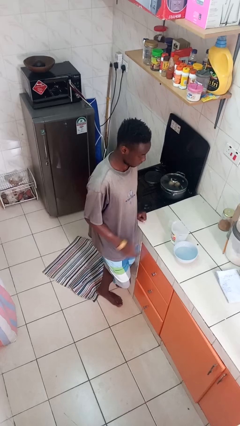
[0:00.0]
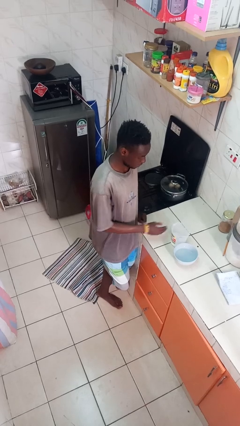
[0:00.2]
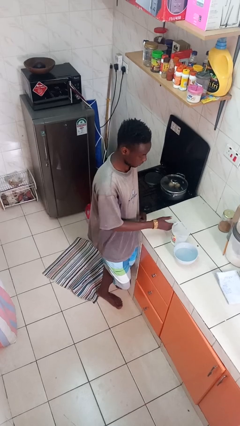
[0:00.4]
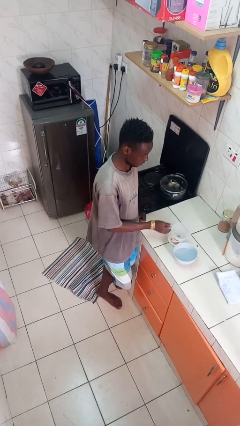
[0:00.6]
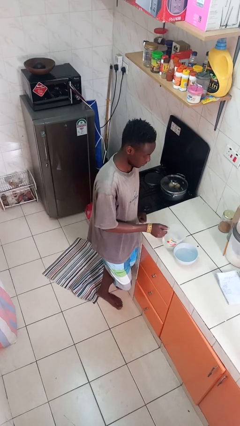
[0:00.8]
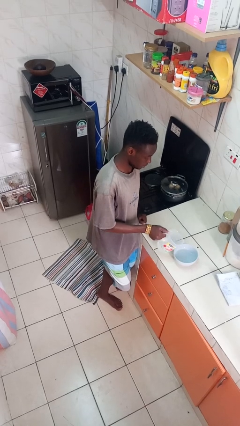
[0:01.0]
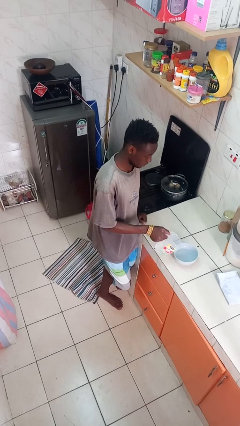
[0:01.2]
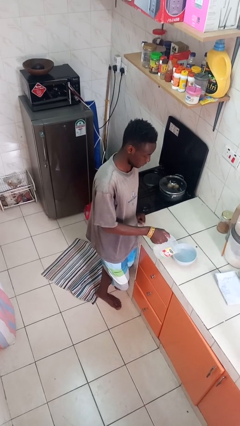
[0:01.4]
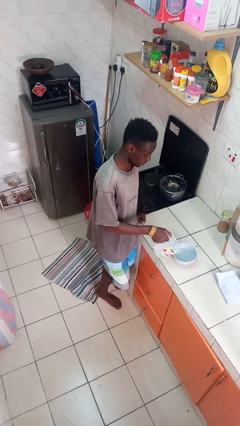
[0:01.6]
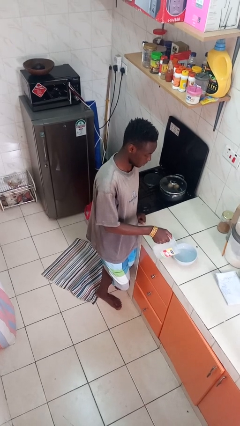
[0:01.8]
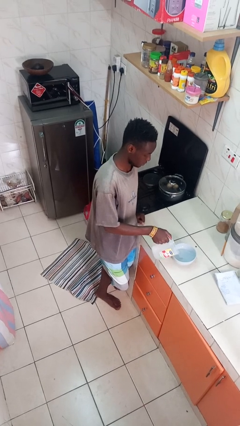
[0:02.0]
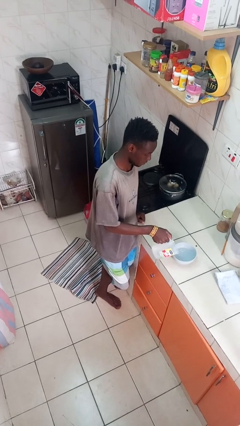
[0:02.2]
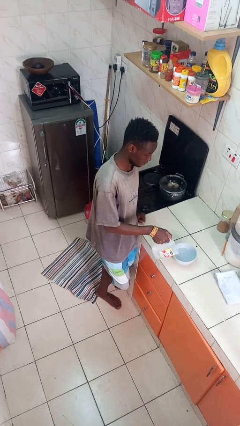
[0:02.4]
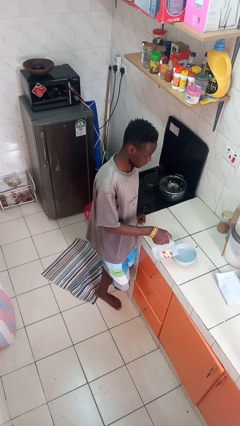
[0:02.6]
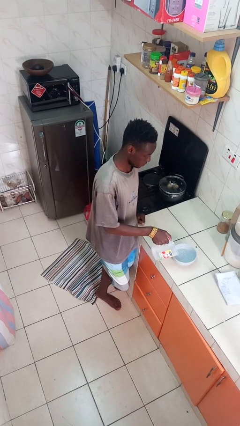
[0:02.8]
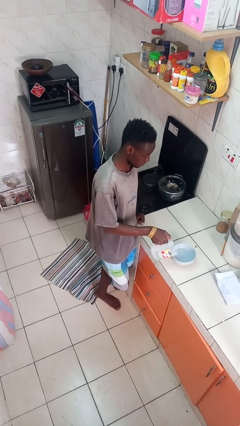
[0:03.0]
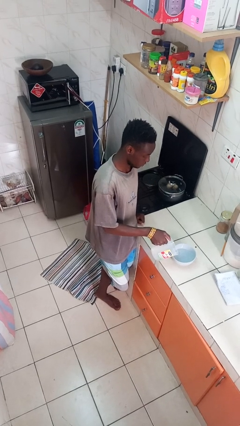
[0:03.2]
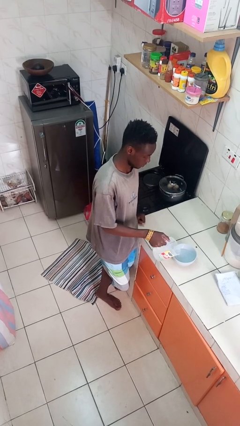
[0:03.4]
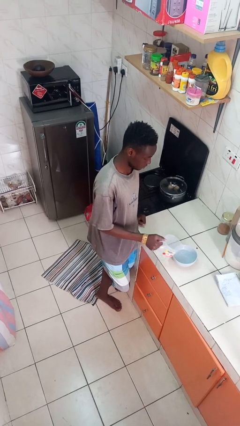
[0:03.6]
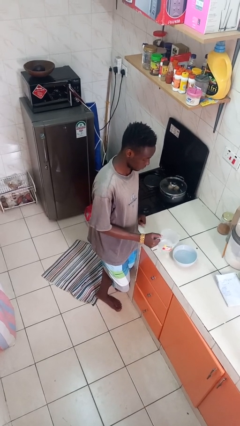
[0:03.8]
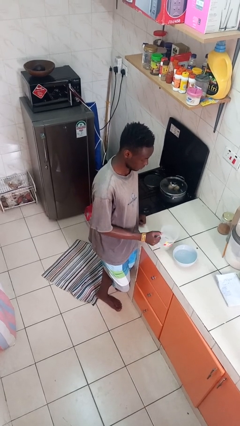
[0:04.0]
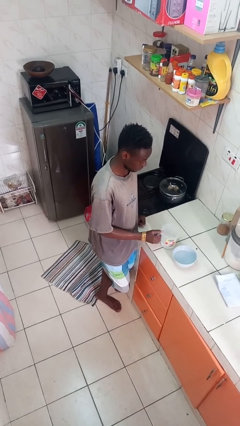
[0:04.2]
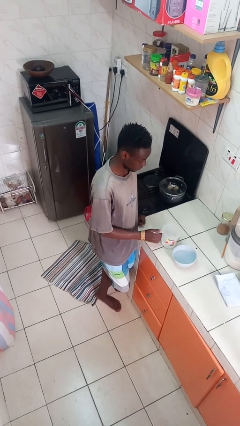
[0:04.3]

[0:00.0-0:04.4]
person pours into bowl

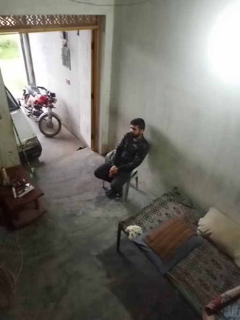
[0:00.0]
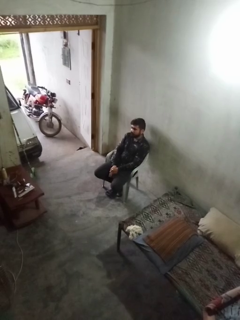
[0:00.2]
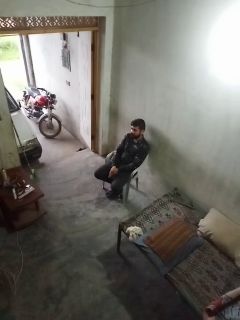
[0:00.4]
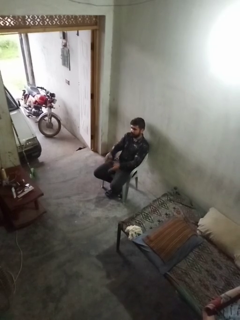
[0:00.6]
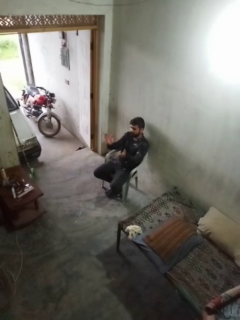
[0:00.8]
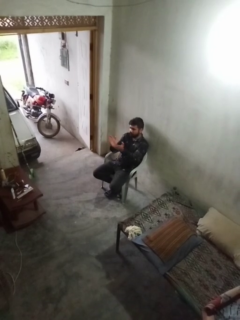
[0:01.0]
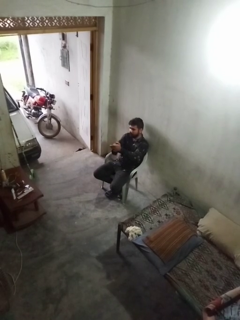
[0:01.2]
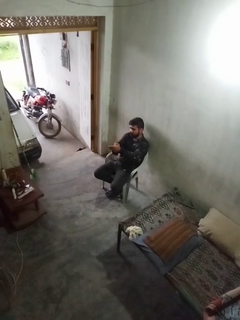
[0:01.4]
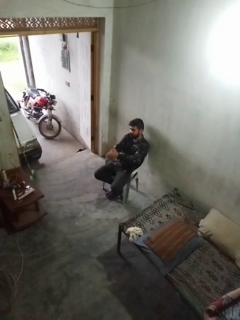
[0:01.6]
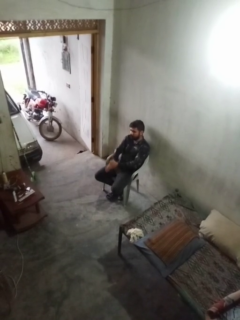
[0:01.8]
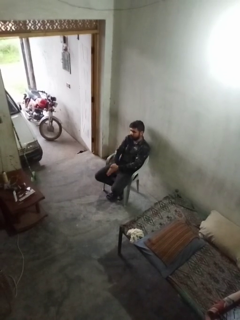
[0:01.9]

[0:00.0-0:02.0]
person claps hands

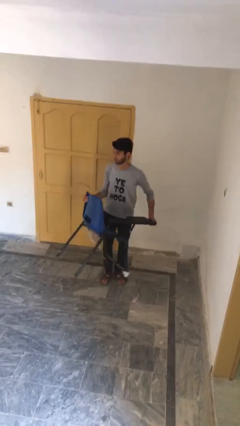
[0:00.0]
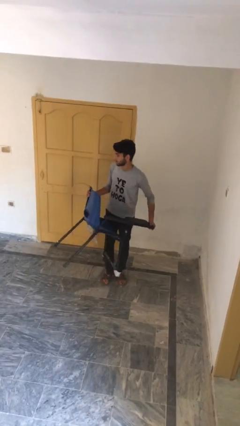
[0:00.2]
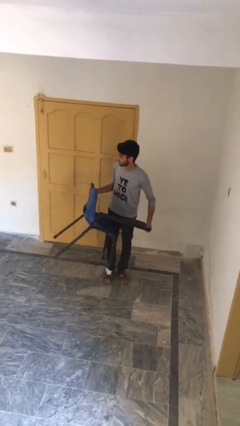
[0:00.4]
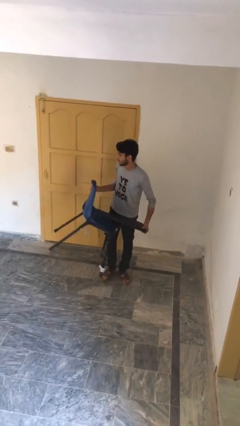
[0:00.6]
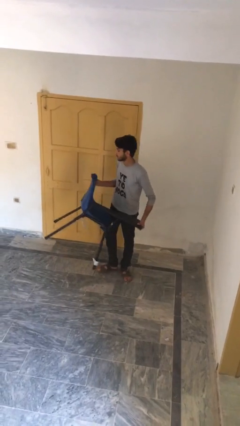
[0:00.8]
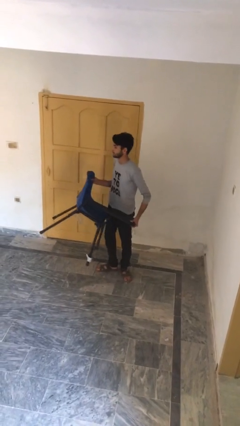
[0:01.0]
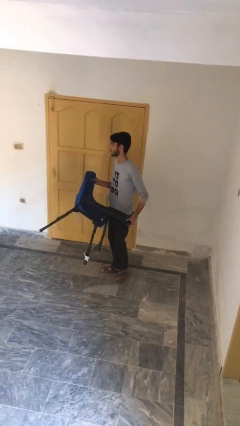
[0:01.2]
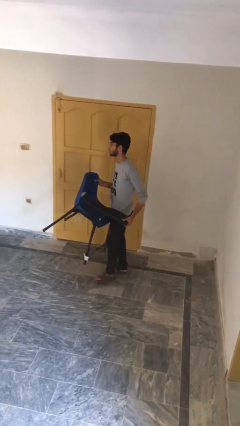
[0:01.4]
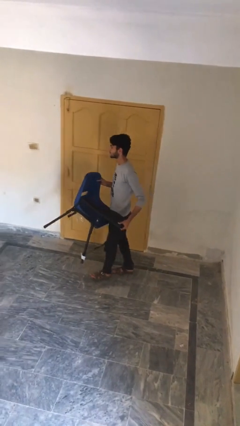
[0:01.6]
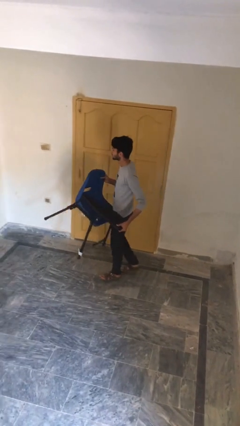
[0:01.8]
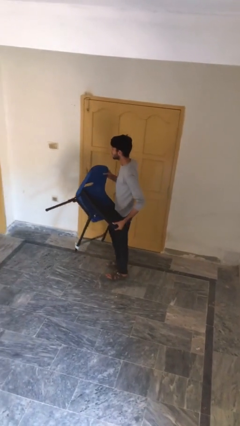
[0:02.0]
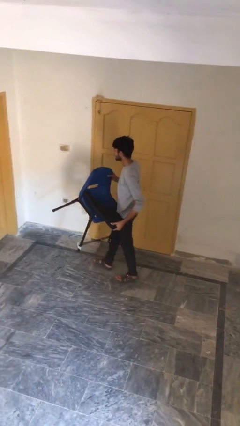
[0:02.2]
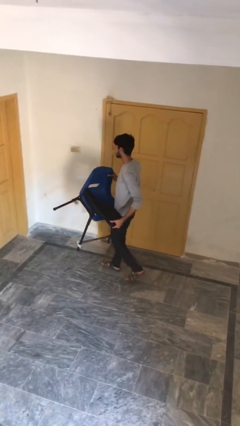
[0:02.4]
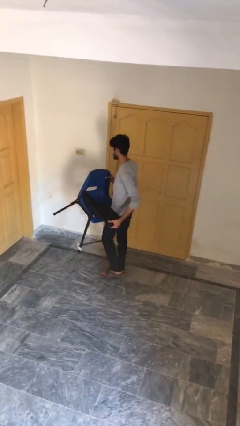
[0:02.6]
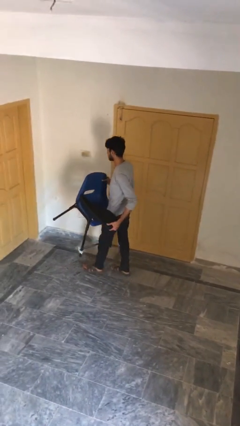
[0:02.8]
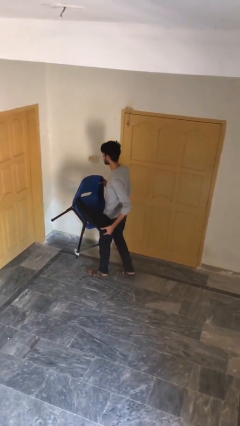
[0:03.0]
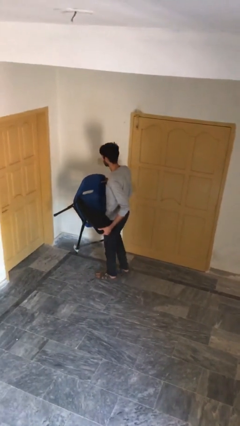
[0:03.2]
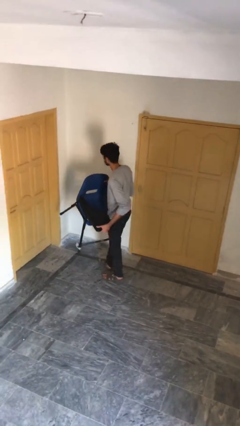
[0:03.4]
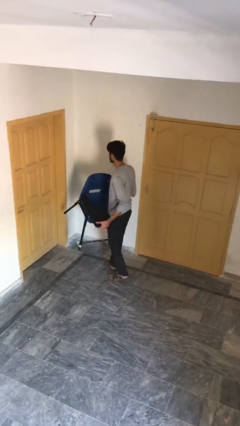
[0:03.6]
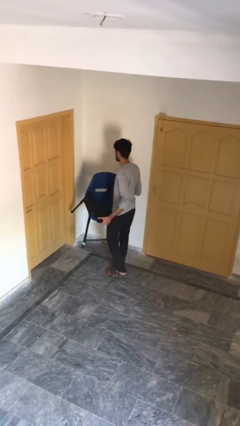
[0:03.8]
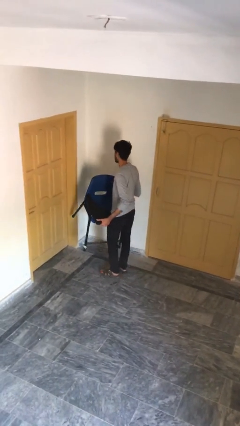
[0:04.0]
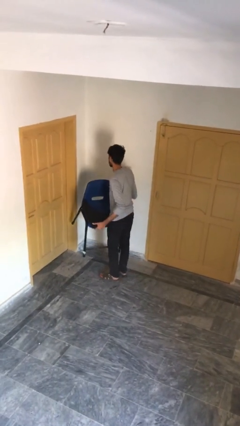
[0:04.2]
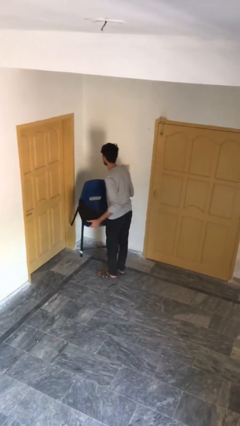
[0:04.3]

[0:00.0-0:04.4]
person carries heavy object

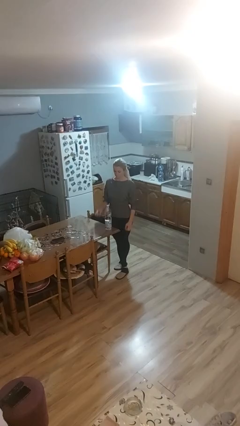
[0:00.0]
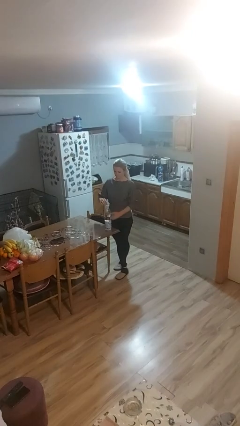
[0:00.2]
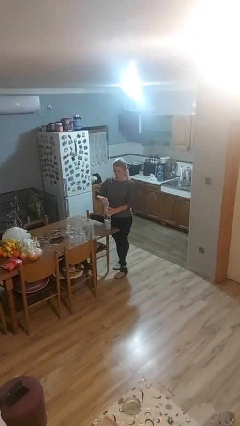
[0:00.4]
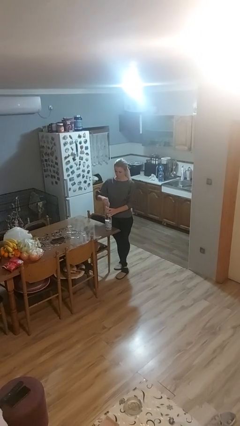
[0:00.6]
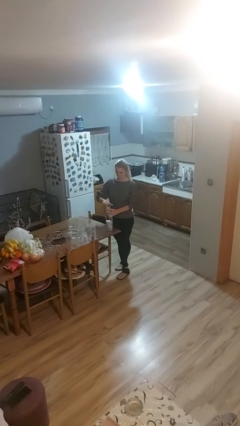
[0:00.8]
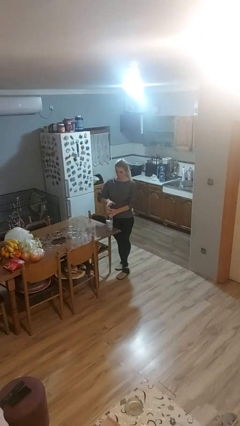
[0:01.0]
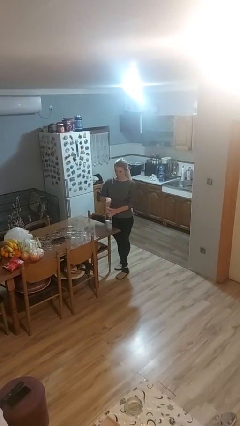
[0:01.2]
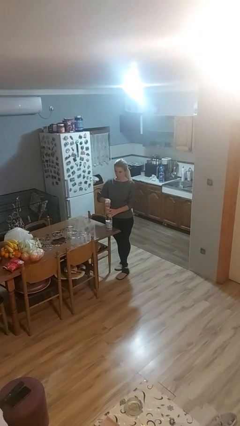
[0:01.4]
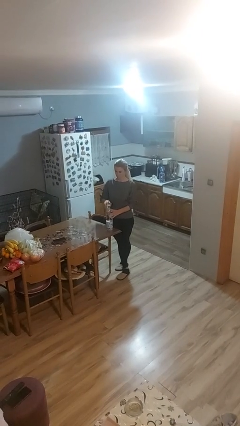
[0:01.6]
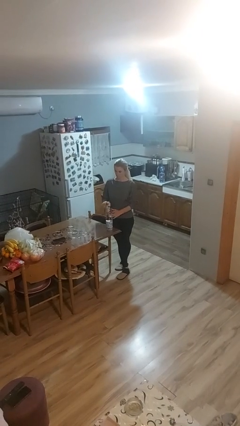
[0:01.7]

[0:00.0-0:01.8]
person screws lid to bottle

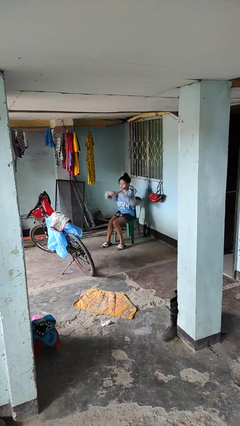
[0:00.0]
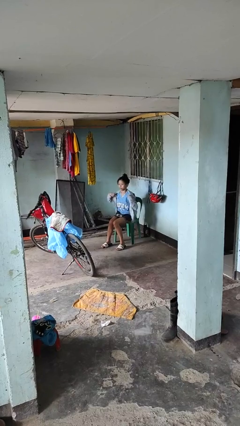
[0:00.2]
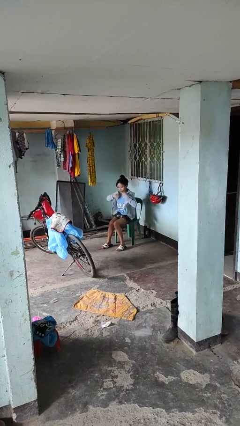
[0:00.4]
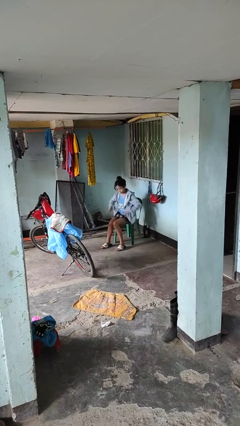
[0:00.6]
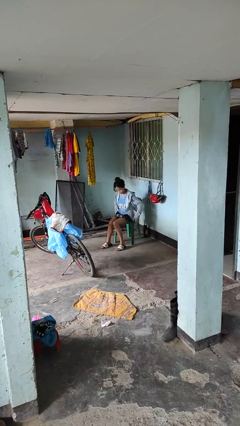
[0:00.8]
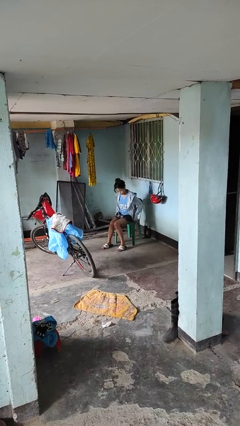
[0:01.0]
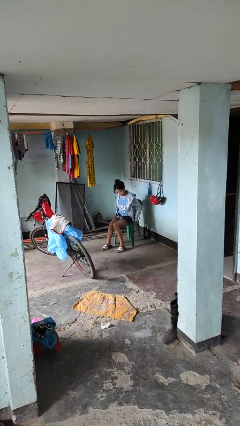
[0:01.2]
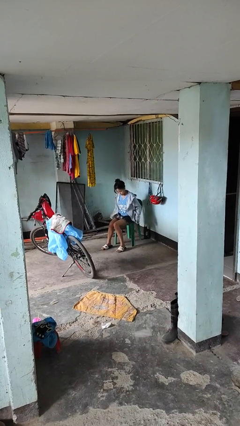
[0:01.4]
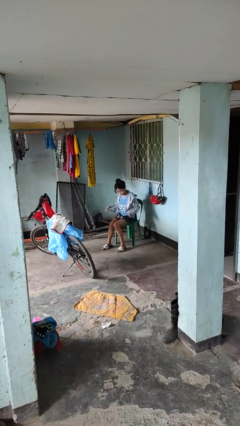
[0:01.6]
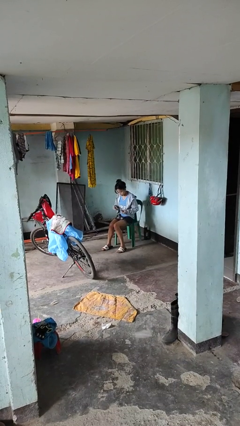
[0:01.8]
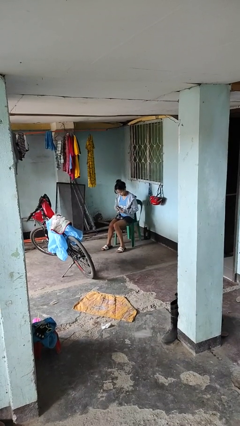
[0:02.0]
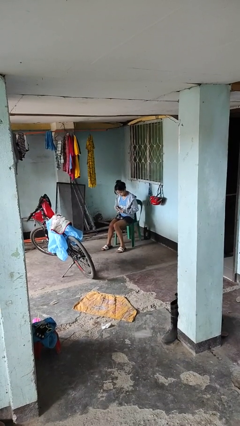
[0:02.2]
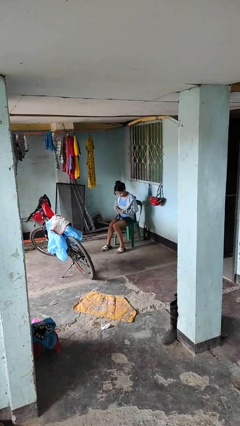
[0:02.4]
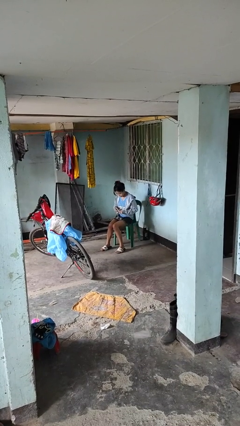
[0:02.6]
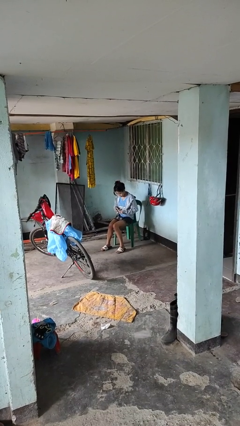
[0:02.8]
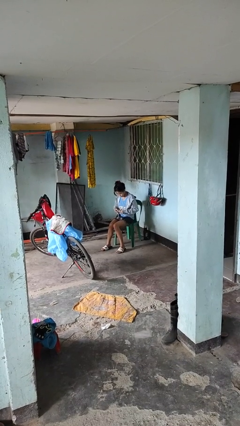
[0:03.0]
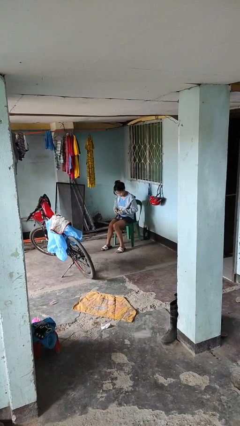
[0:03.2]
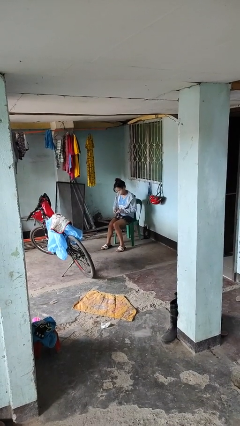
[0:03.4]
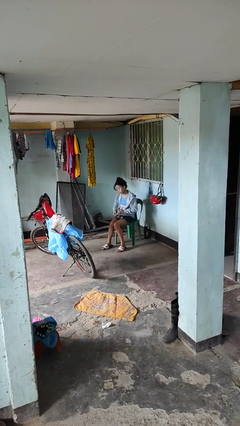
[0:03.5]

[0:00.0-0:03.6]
person puts on jacket

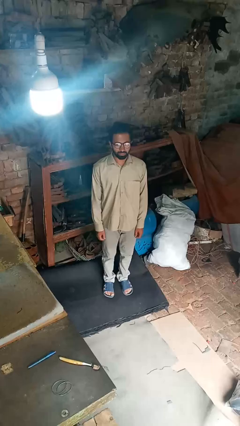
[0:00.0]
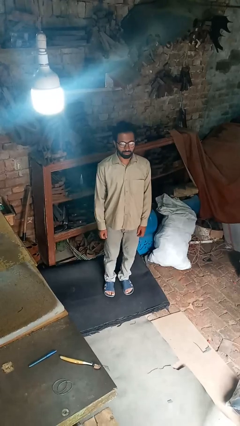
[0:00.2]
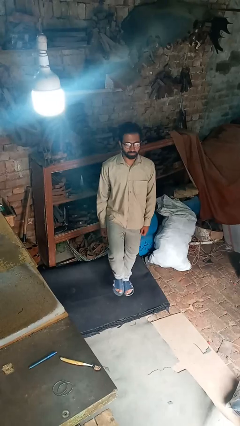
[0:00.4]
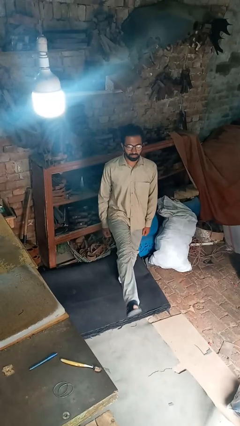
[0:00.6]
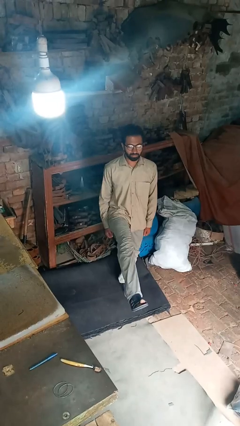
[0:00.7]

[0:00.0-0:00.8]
person karate kicks

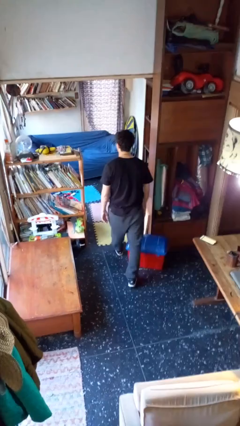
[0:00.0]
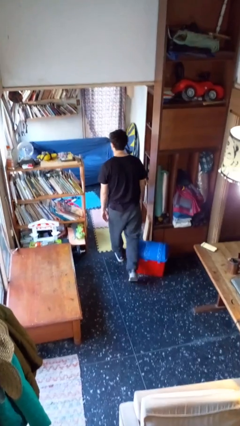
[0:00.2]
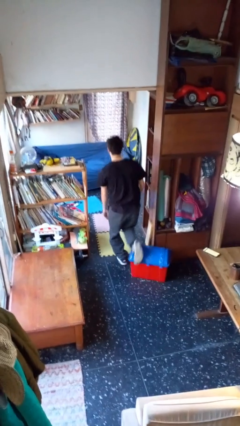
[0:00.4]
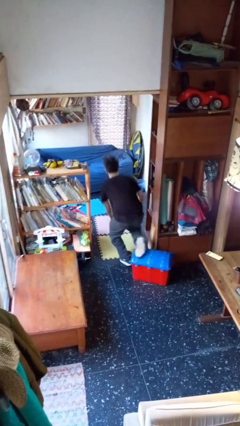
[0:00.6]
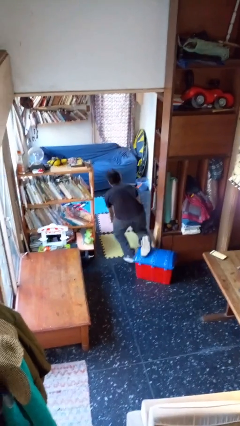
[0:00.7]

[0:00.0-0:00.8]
person trips on object on floor
